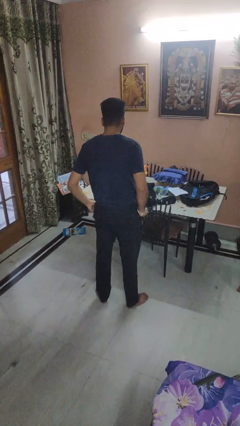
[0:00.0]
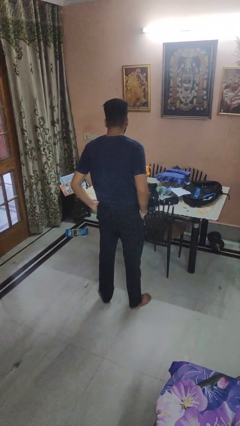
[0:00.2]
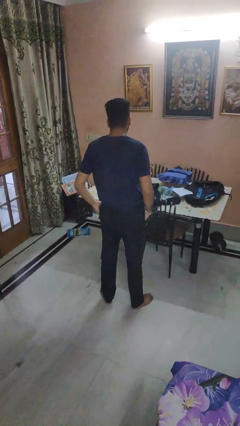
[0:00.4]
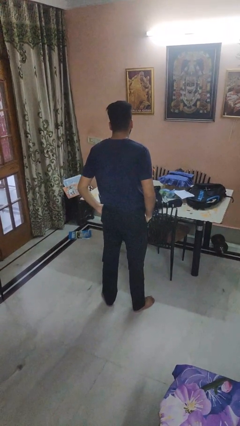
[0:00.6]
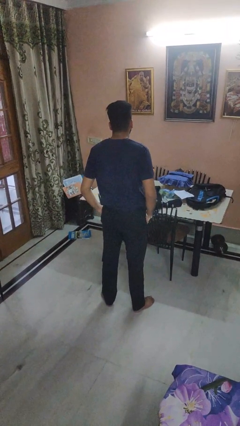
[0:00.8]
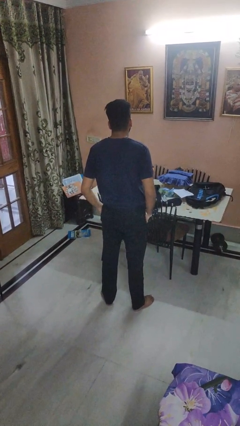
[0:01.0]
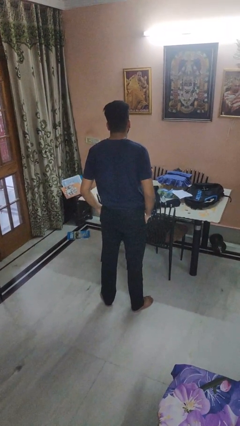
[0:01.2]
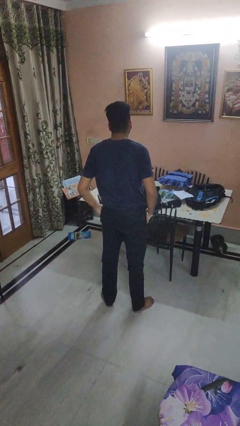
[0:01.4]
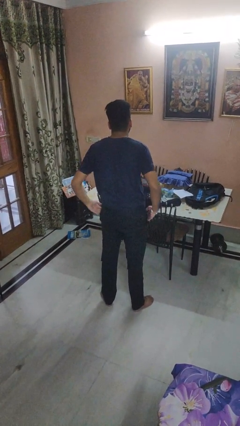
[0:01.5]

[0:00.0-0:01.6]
person puts hands in back pockets

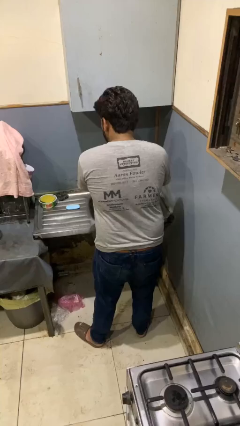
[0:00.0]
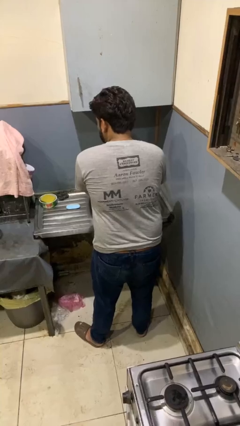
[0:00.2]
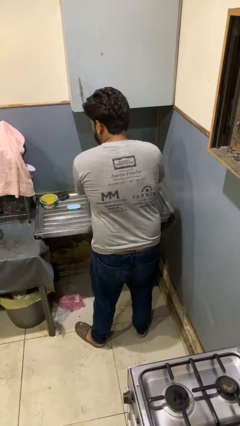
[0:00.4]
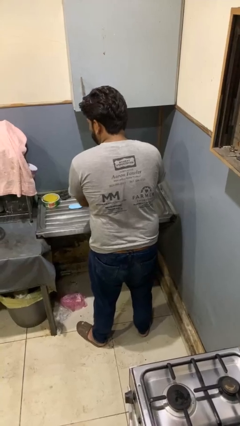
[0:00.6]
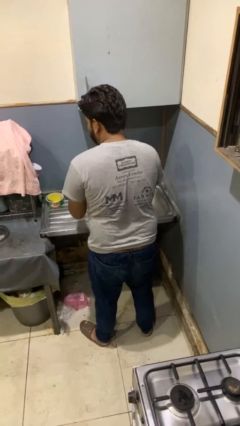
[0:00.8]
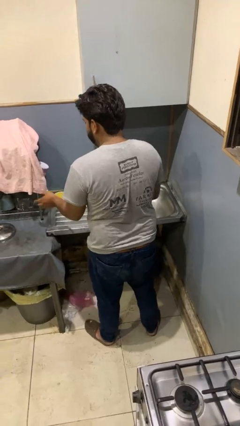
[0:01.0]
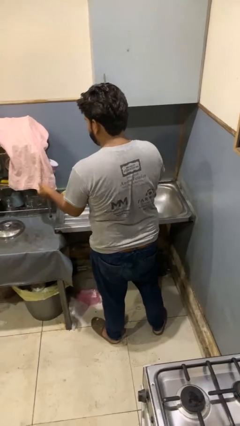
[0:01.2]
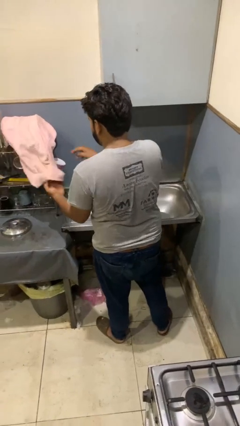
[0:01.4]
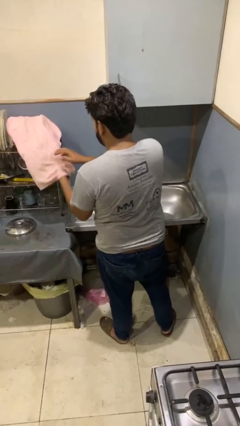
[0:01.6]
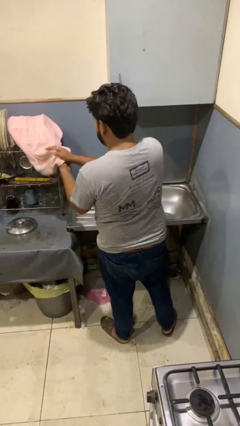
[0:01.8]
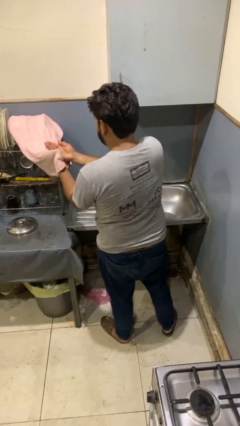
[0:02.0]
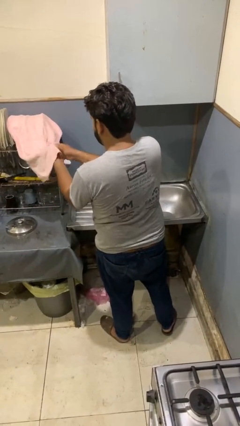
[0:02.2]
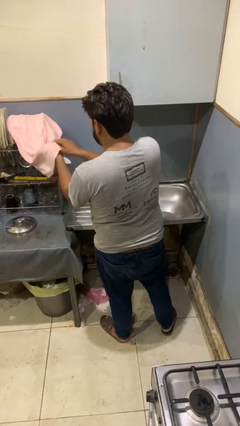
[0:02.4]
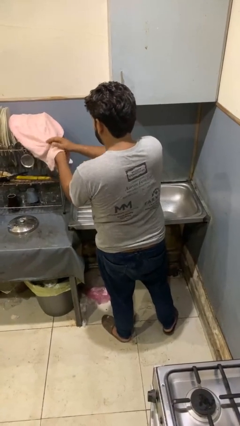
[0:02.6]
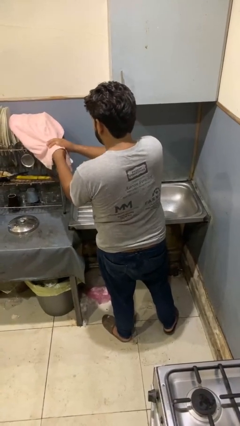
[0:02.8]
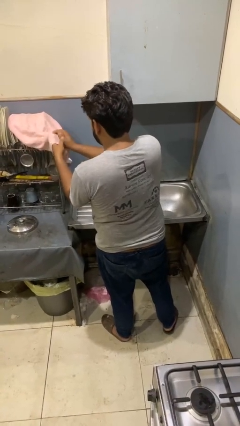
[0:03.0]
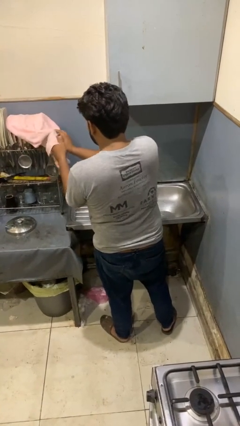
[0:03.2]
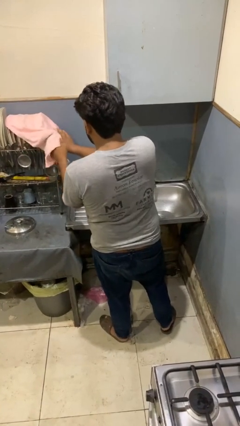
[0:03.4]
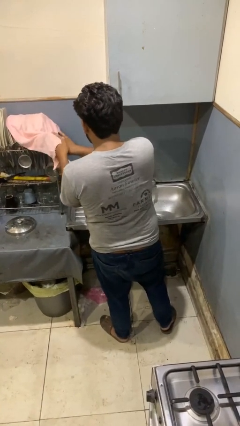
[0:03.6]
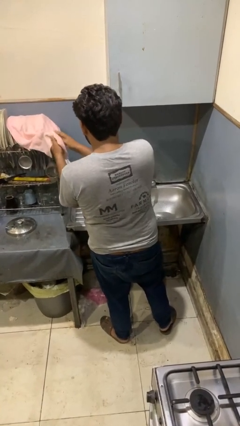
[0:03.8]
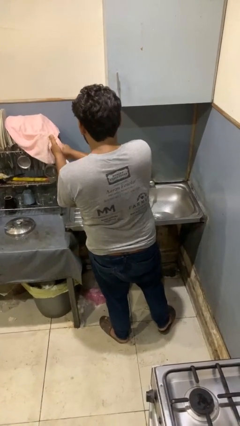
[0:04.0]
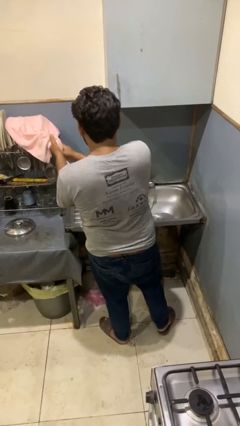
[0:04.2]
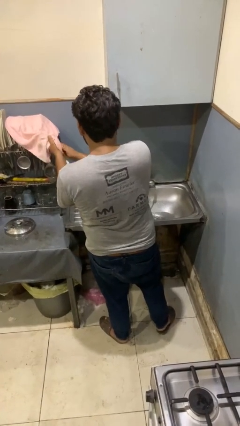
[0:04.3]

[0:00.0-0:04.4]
person dries hands with towel

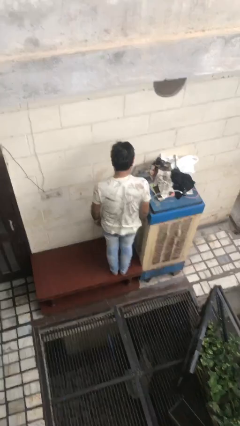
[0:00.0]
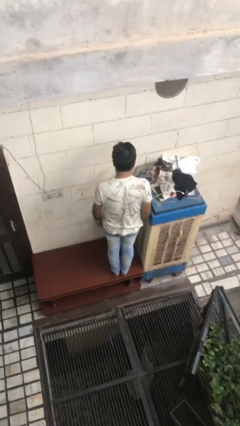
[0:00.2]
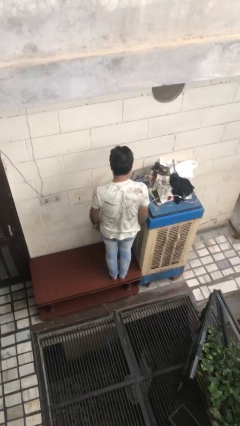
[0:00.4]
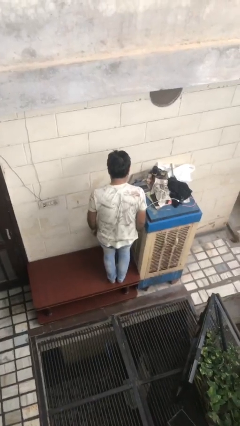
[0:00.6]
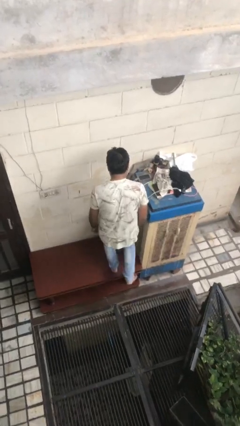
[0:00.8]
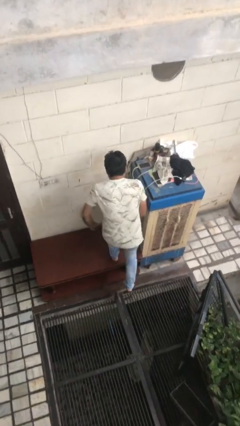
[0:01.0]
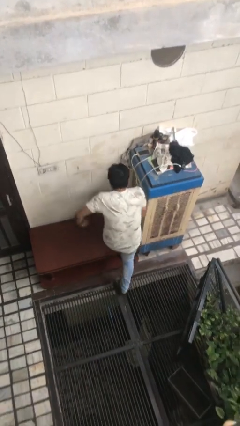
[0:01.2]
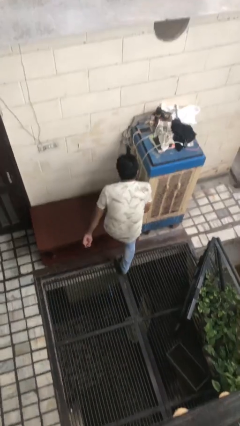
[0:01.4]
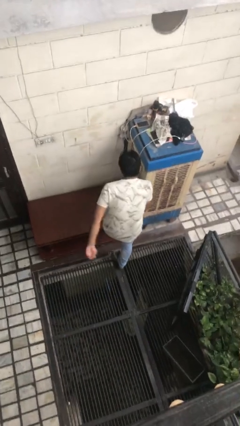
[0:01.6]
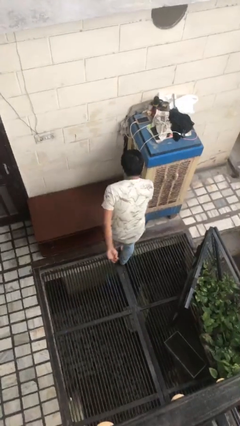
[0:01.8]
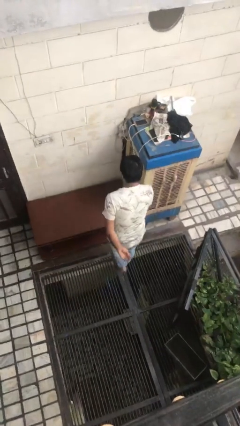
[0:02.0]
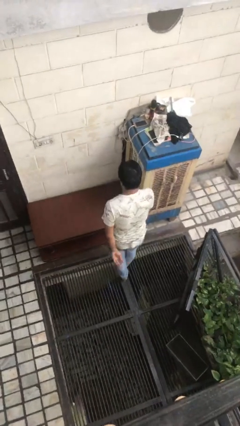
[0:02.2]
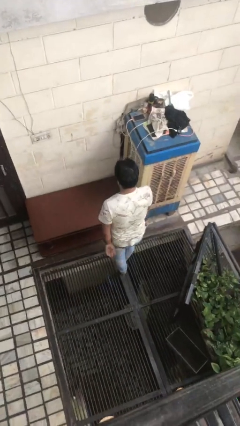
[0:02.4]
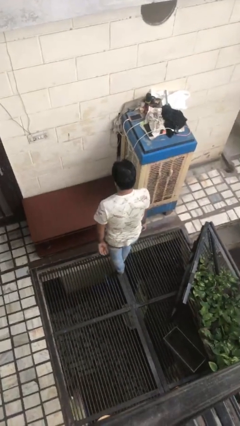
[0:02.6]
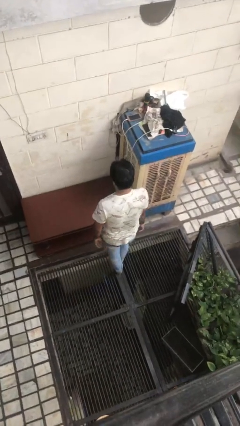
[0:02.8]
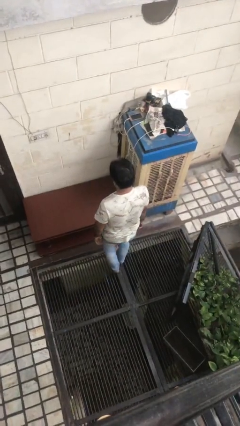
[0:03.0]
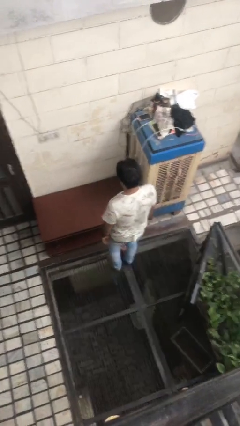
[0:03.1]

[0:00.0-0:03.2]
person climbs off table

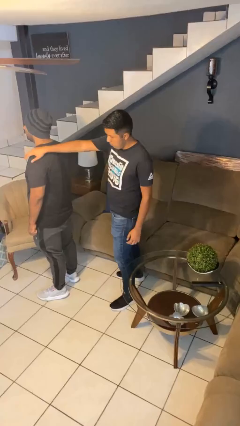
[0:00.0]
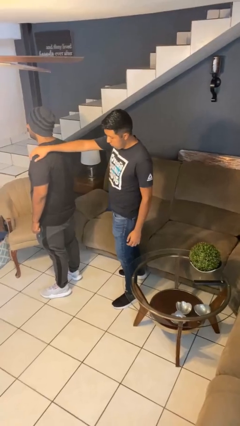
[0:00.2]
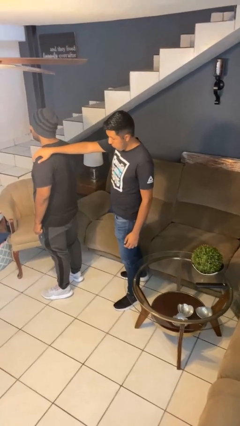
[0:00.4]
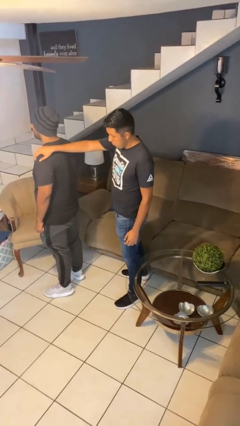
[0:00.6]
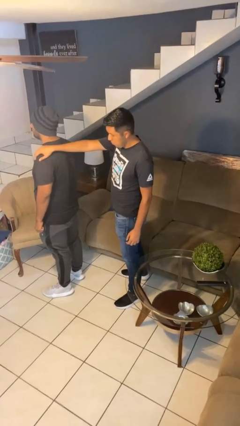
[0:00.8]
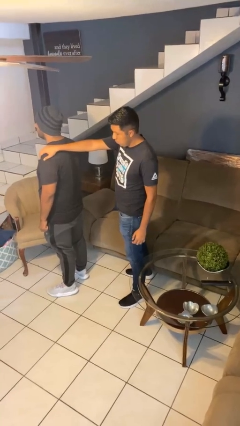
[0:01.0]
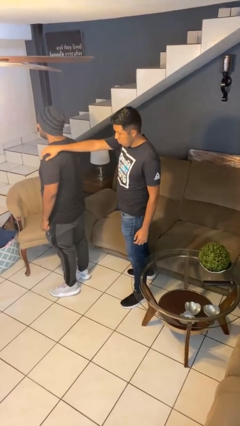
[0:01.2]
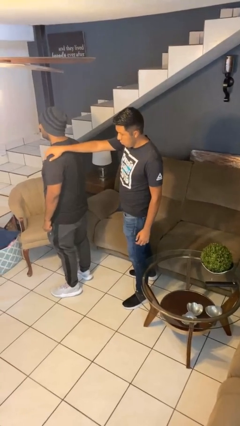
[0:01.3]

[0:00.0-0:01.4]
person grabs person by shoulder

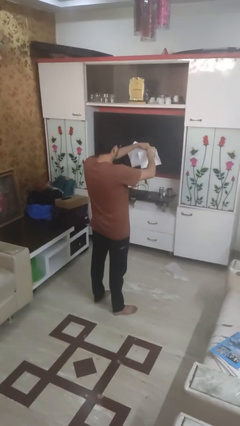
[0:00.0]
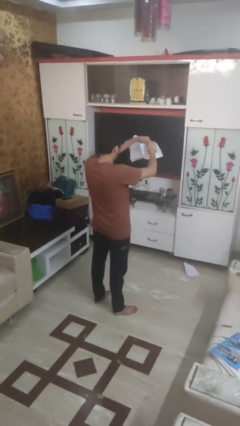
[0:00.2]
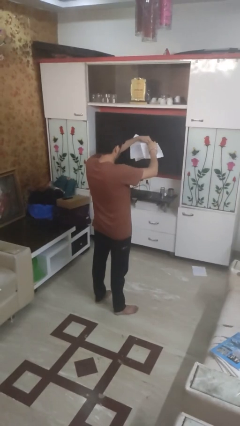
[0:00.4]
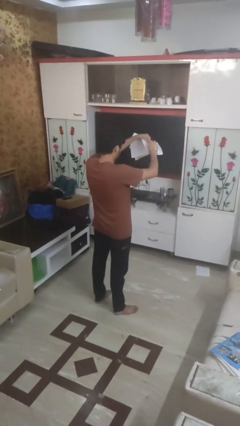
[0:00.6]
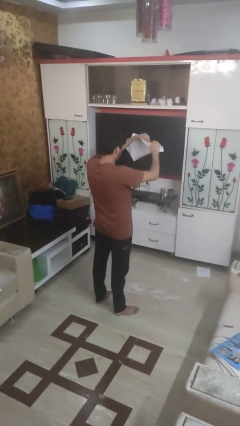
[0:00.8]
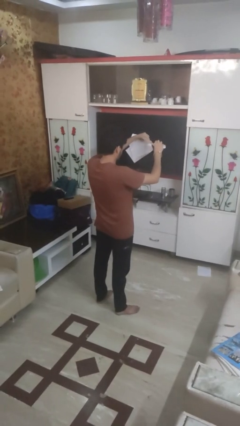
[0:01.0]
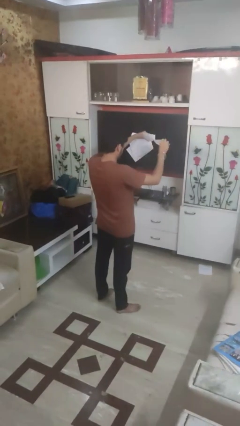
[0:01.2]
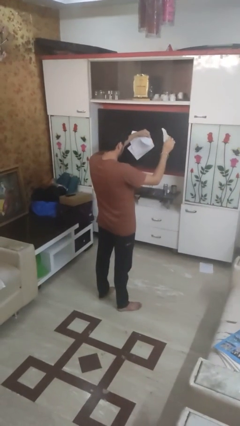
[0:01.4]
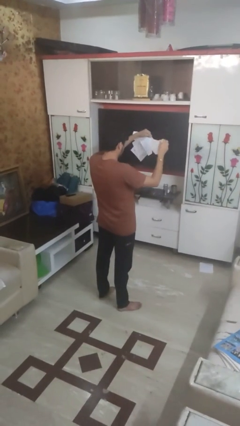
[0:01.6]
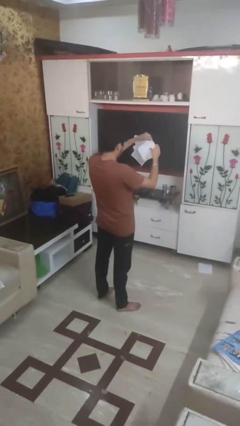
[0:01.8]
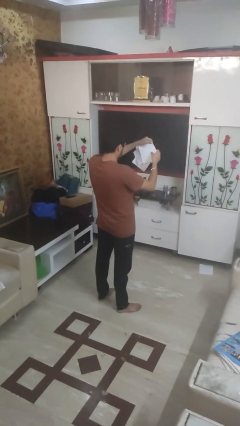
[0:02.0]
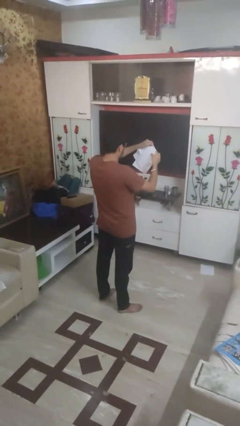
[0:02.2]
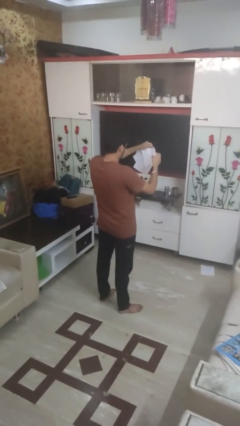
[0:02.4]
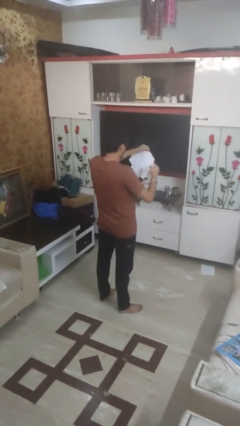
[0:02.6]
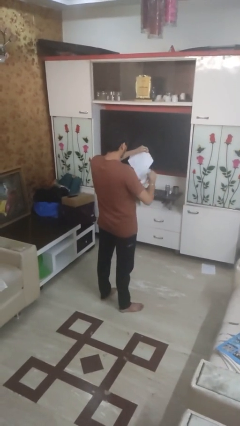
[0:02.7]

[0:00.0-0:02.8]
person tears paper

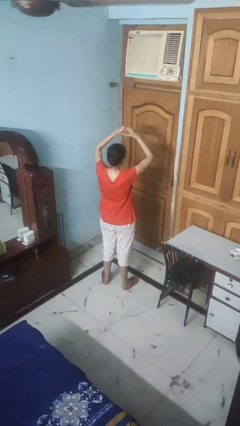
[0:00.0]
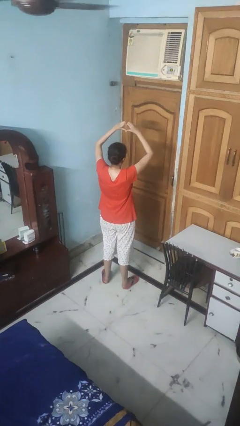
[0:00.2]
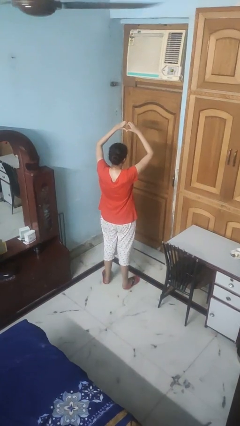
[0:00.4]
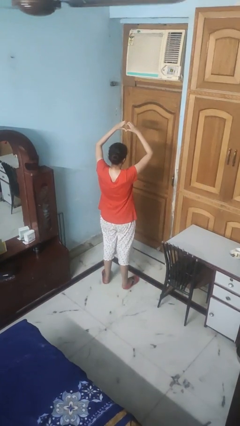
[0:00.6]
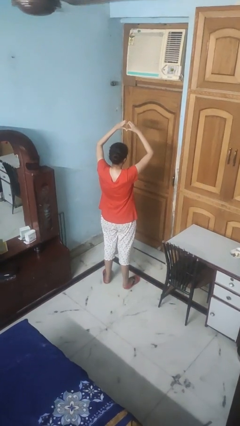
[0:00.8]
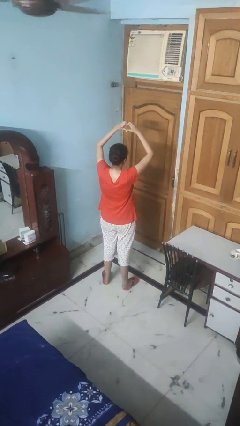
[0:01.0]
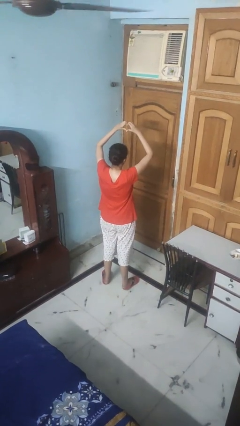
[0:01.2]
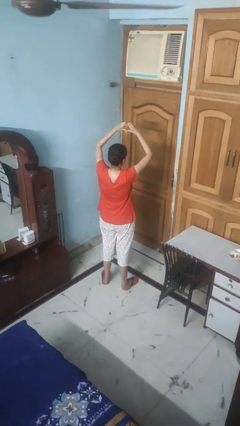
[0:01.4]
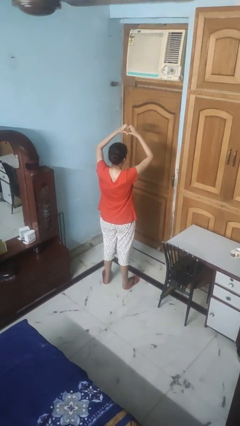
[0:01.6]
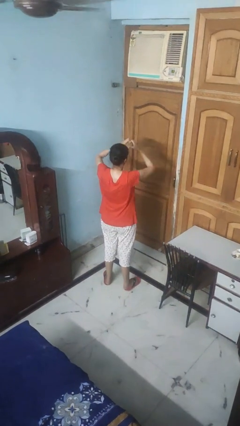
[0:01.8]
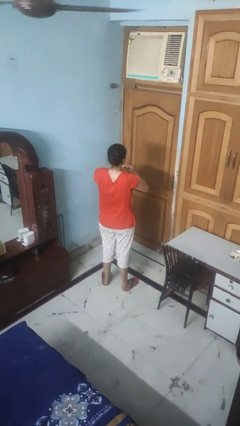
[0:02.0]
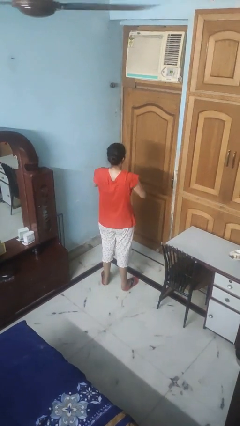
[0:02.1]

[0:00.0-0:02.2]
person gestures heart

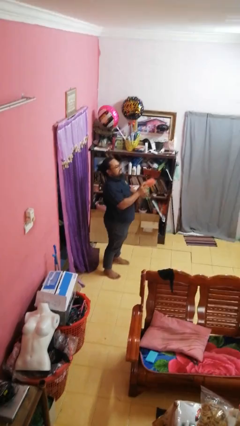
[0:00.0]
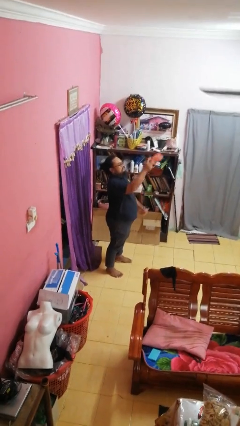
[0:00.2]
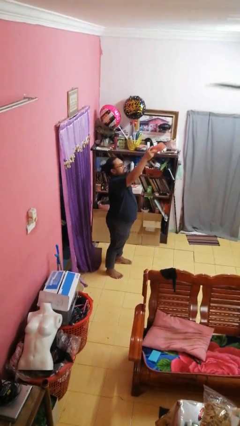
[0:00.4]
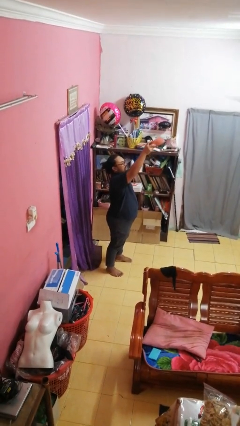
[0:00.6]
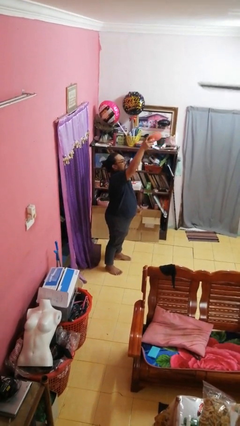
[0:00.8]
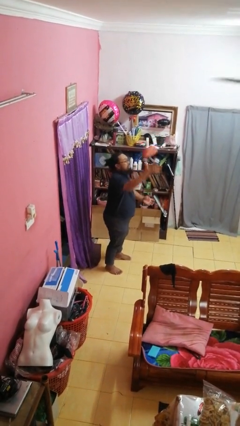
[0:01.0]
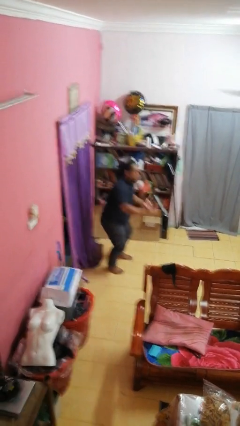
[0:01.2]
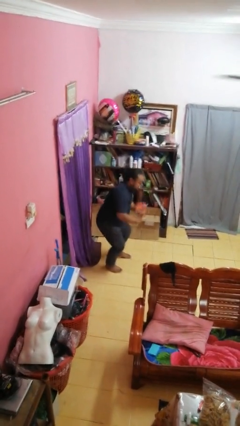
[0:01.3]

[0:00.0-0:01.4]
person drops object
